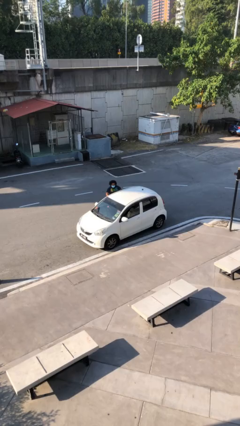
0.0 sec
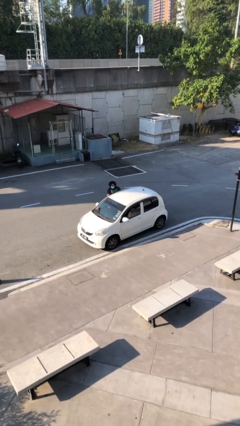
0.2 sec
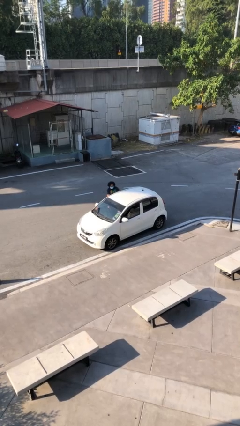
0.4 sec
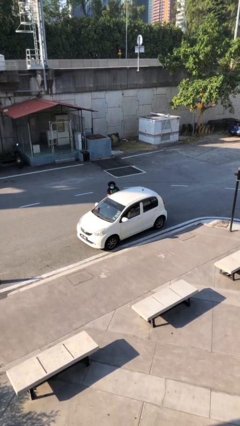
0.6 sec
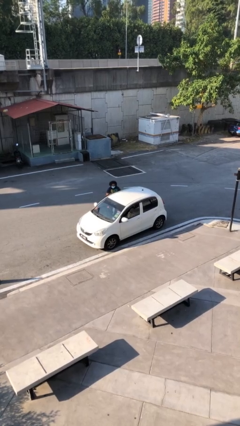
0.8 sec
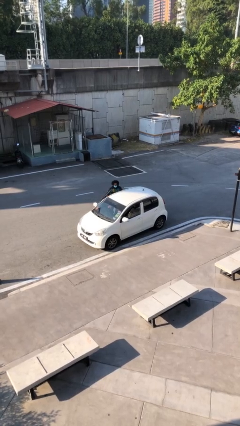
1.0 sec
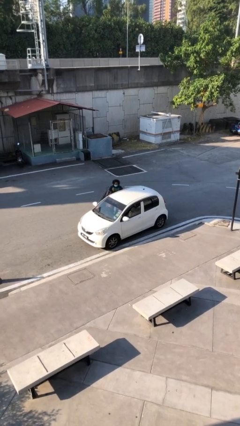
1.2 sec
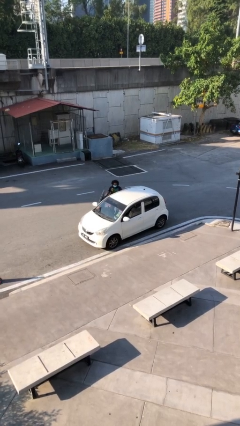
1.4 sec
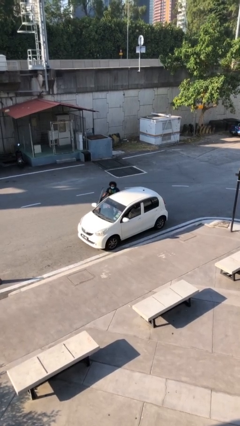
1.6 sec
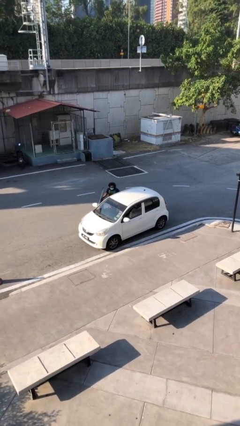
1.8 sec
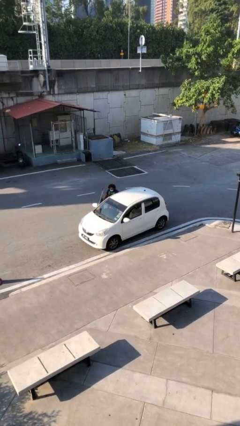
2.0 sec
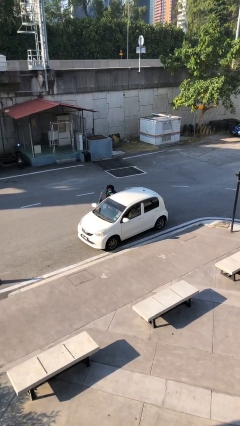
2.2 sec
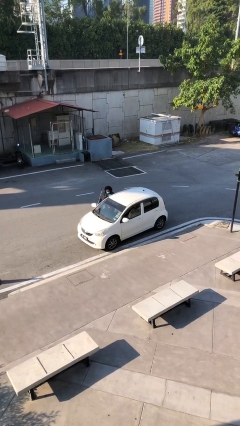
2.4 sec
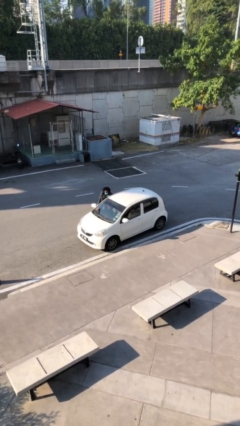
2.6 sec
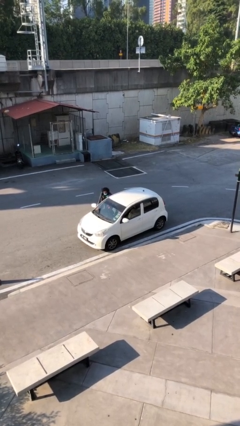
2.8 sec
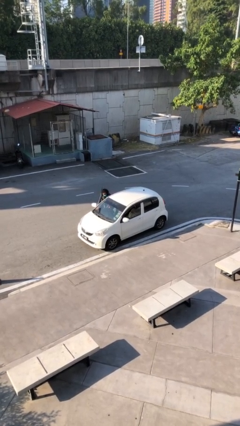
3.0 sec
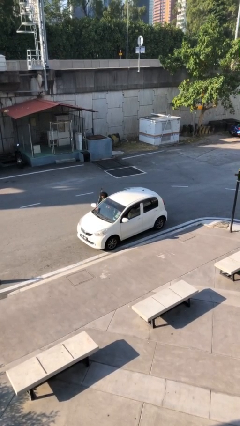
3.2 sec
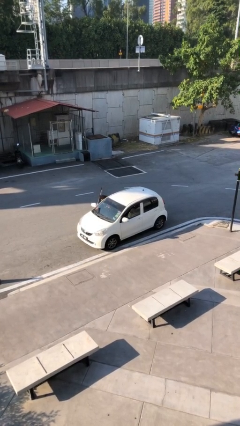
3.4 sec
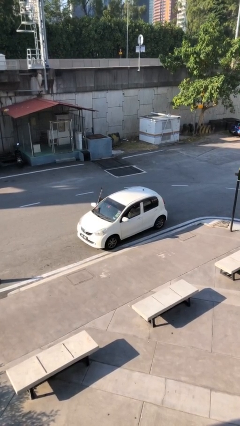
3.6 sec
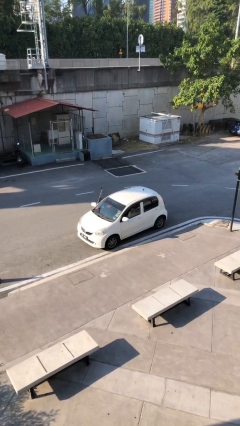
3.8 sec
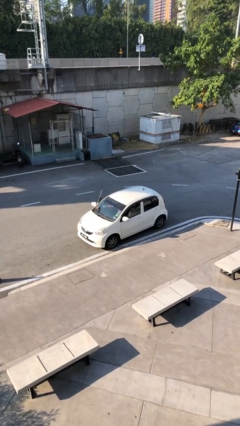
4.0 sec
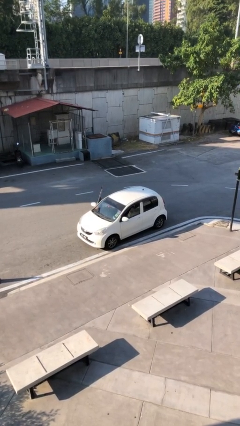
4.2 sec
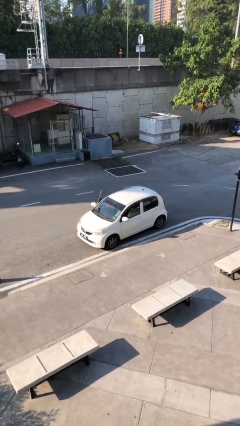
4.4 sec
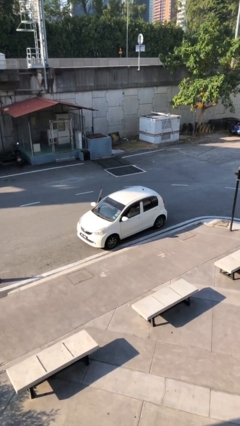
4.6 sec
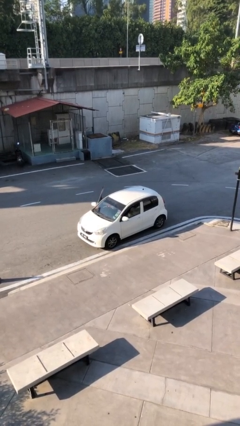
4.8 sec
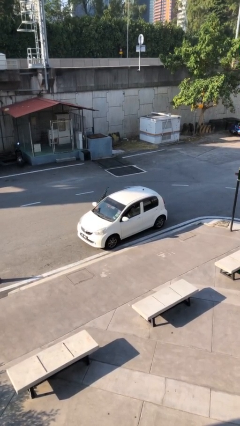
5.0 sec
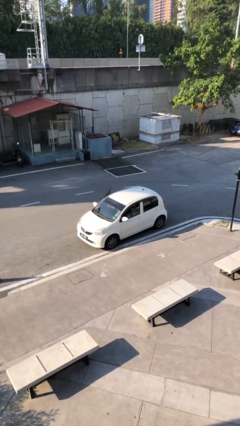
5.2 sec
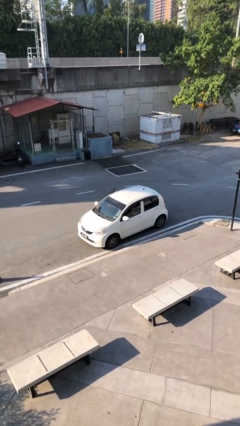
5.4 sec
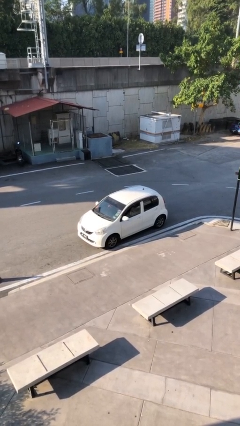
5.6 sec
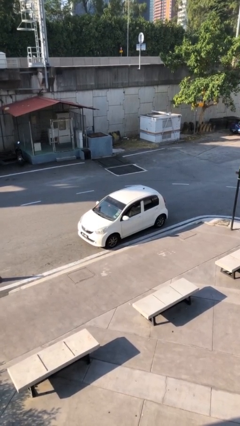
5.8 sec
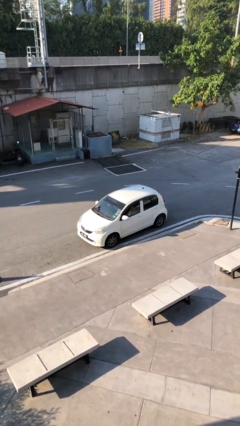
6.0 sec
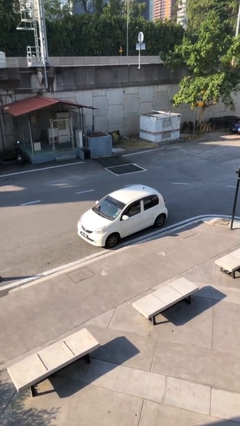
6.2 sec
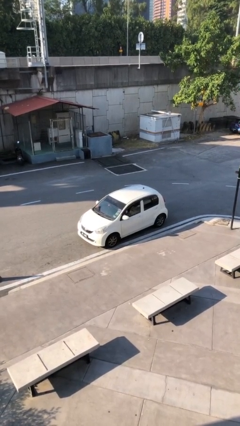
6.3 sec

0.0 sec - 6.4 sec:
car picks up person

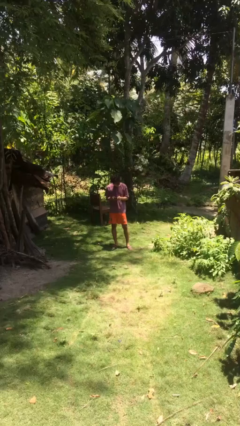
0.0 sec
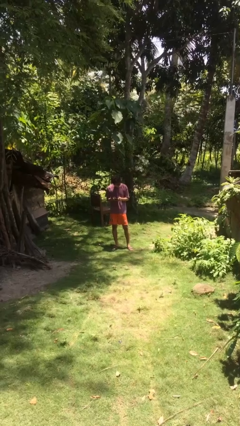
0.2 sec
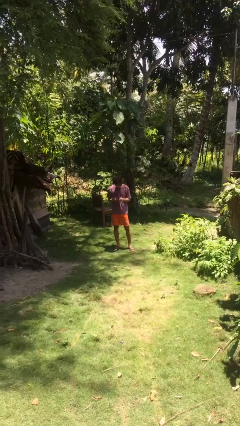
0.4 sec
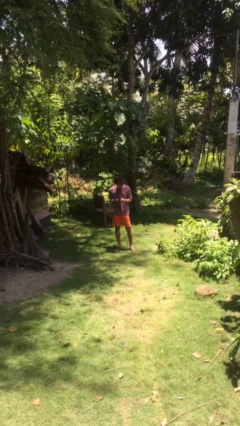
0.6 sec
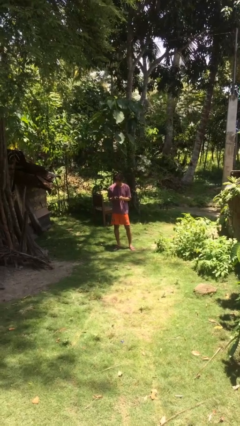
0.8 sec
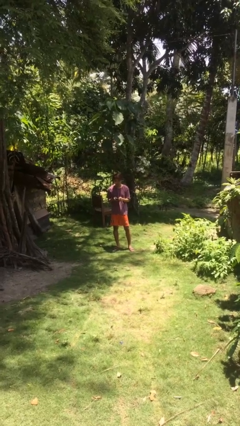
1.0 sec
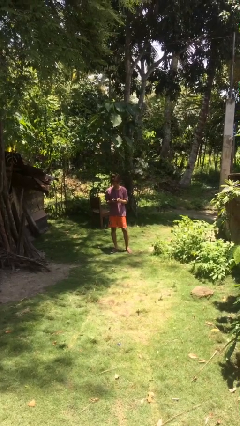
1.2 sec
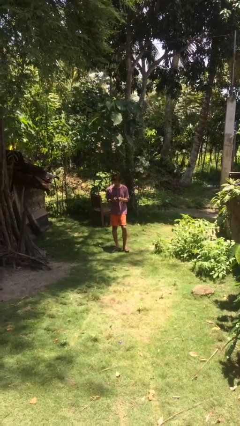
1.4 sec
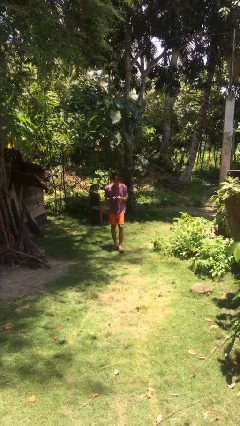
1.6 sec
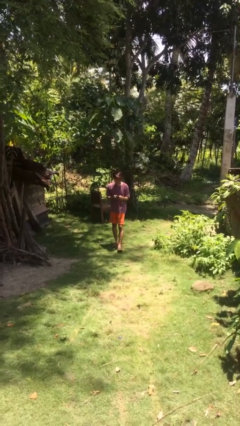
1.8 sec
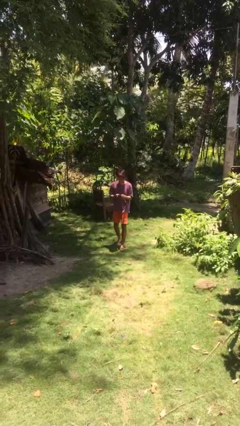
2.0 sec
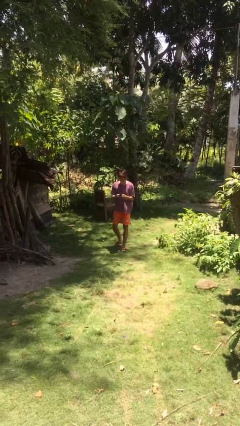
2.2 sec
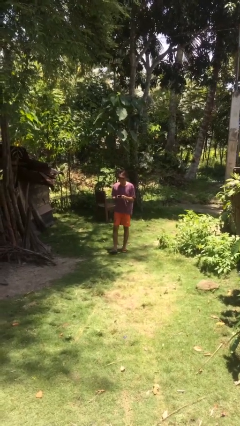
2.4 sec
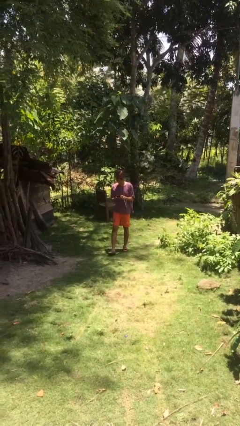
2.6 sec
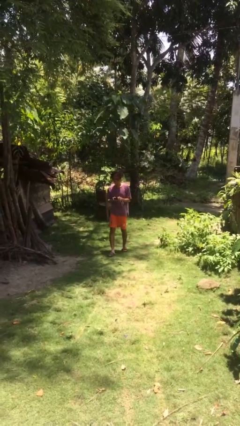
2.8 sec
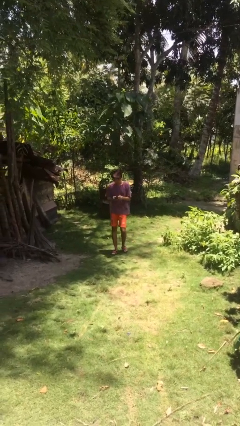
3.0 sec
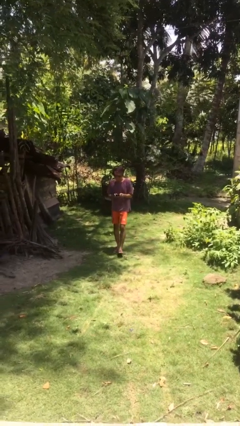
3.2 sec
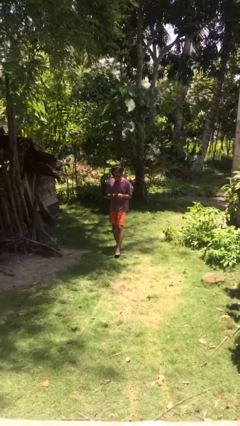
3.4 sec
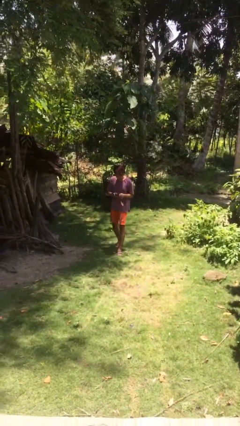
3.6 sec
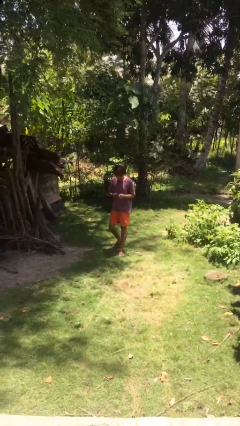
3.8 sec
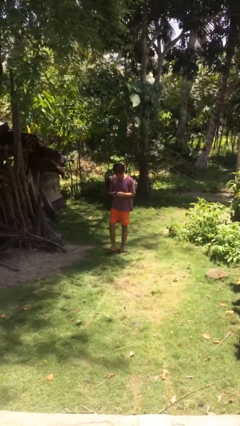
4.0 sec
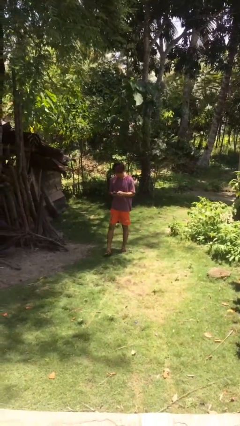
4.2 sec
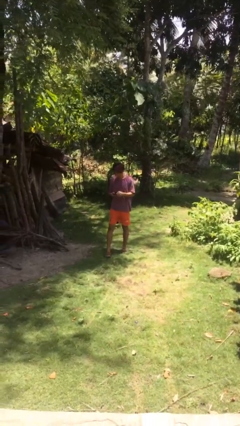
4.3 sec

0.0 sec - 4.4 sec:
person texts on phone

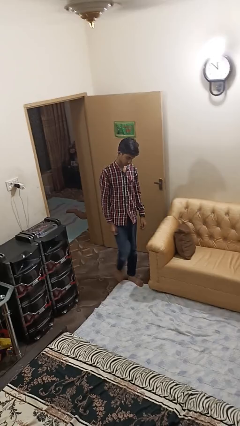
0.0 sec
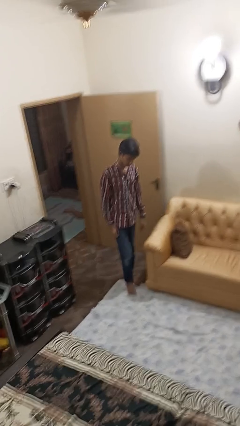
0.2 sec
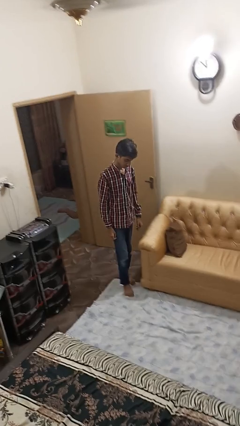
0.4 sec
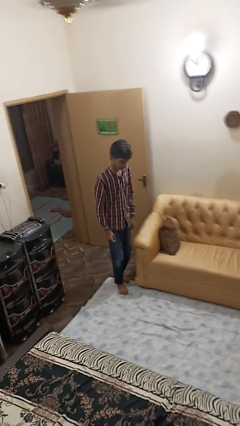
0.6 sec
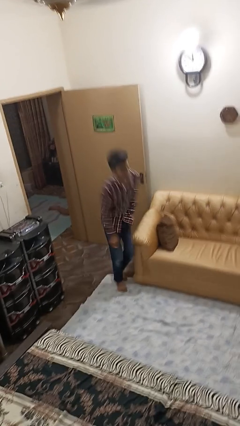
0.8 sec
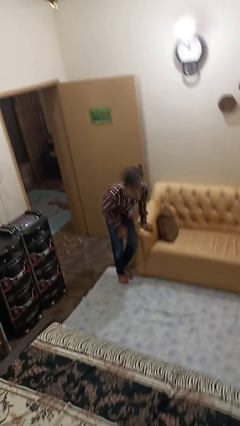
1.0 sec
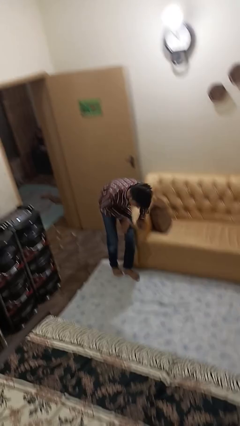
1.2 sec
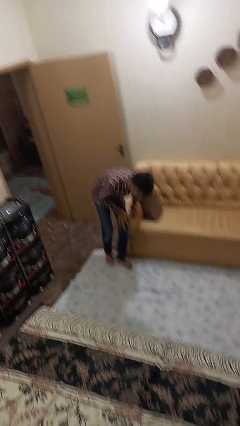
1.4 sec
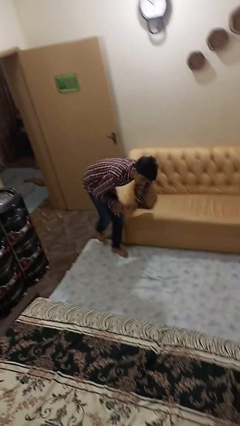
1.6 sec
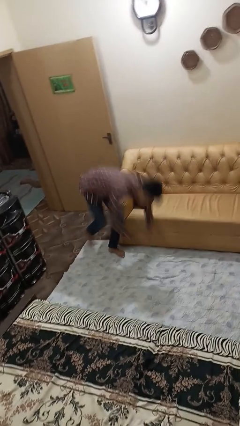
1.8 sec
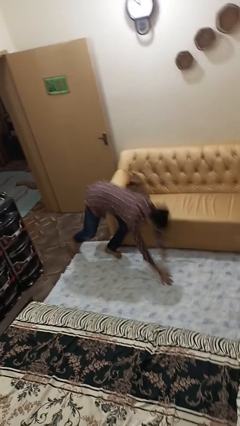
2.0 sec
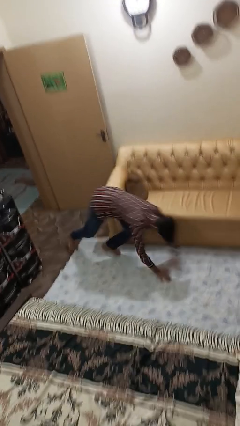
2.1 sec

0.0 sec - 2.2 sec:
person trips on object on floor

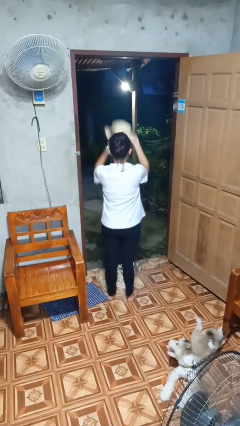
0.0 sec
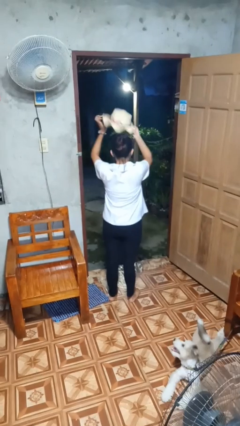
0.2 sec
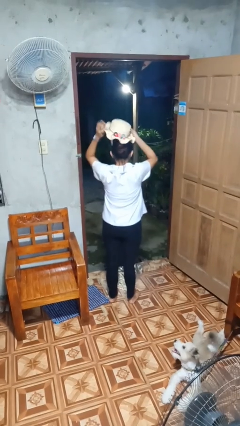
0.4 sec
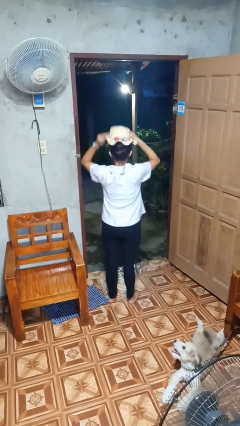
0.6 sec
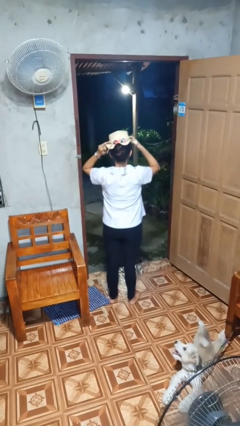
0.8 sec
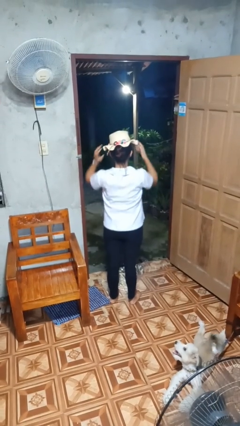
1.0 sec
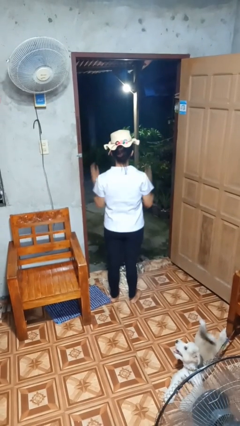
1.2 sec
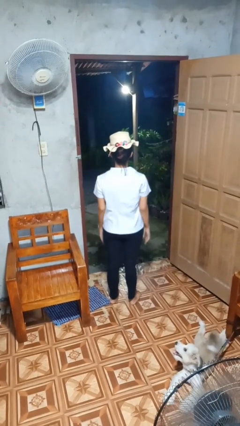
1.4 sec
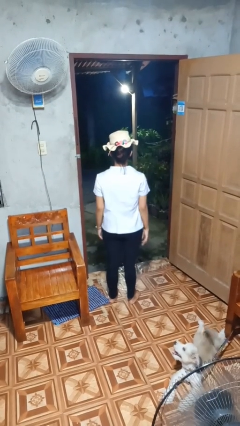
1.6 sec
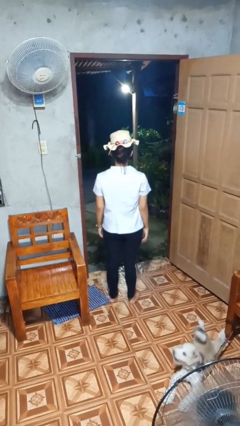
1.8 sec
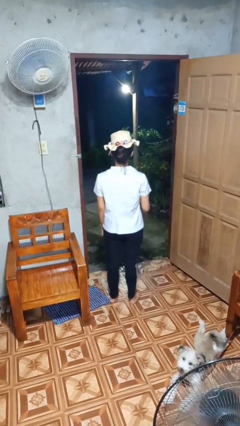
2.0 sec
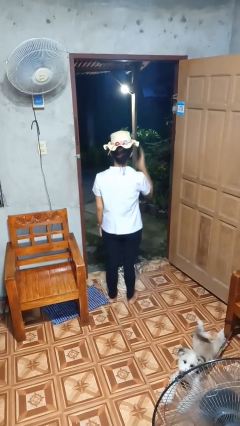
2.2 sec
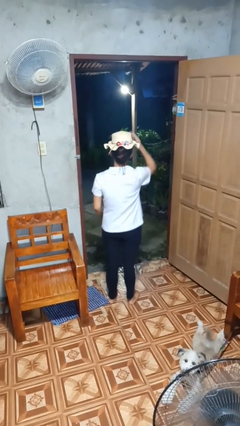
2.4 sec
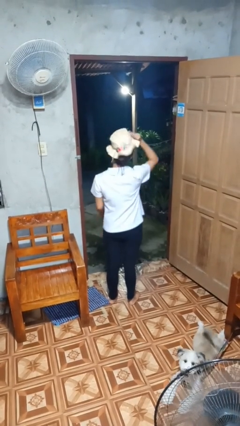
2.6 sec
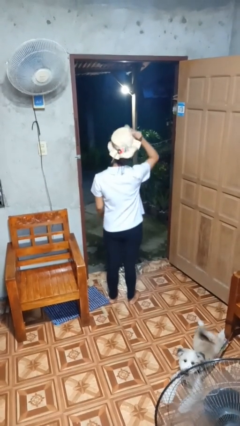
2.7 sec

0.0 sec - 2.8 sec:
person puts on hat

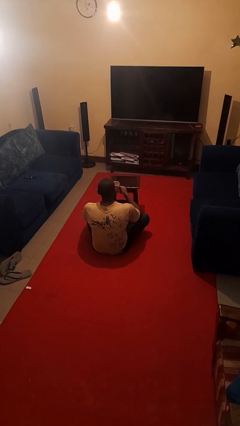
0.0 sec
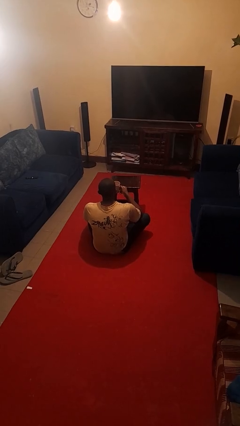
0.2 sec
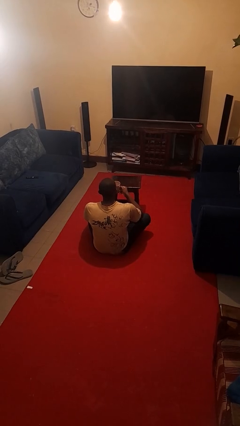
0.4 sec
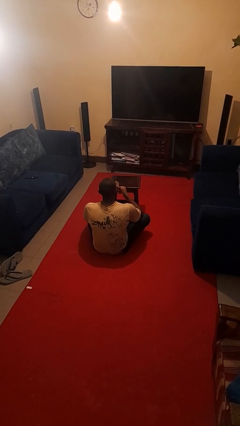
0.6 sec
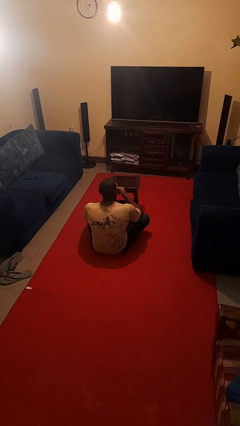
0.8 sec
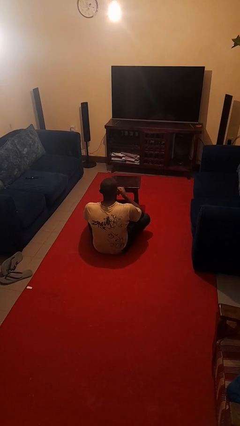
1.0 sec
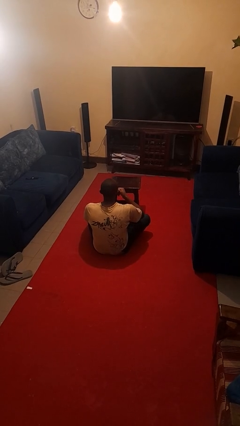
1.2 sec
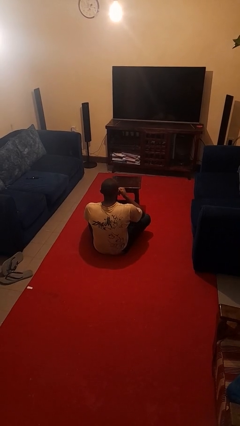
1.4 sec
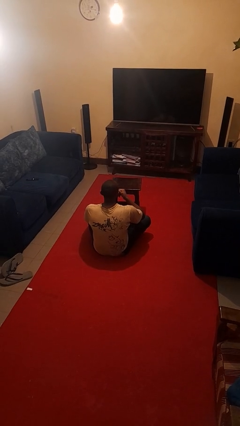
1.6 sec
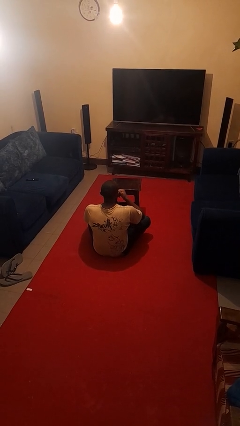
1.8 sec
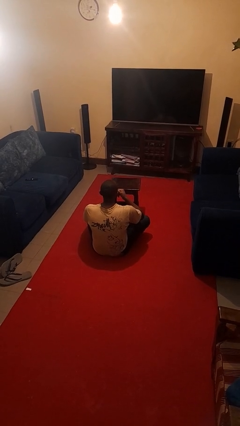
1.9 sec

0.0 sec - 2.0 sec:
person drinks from mug
